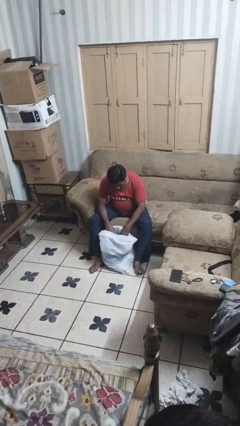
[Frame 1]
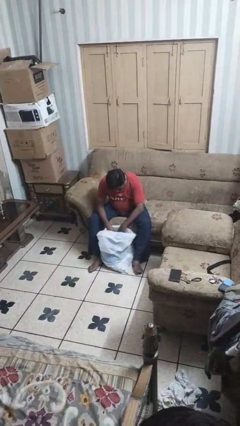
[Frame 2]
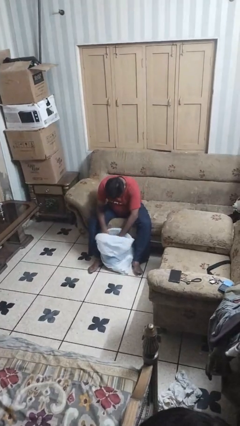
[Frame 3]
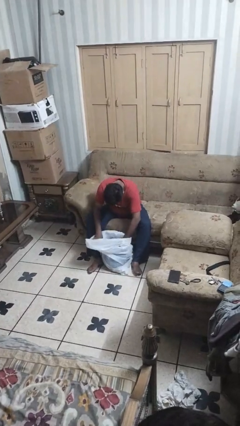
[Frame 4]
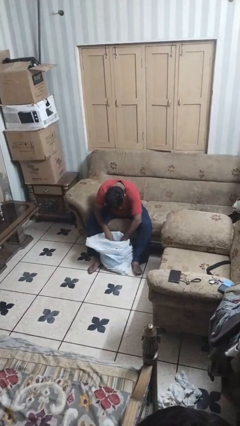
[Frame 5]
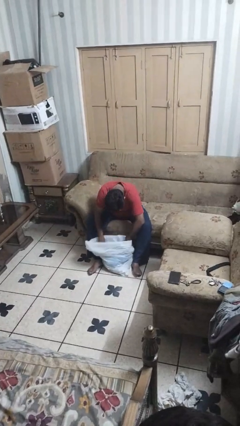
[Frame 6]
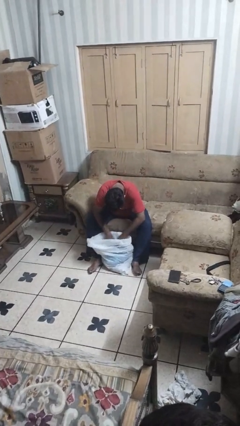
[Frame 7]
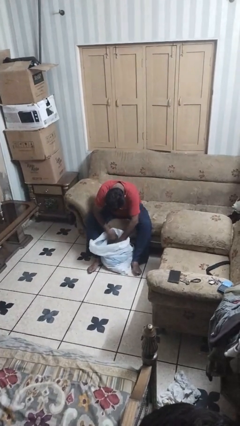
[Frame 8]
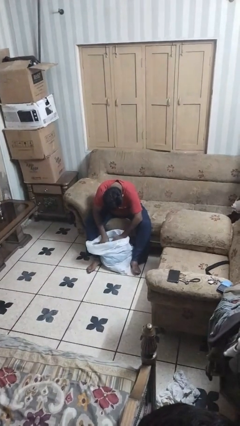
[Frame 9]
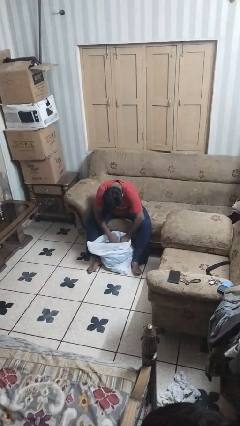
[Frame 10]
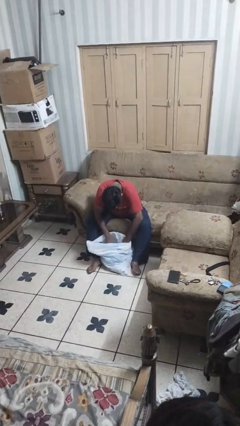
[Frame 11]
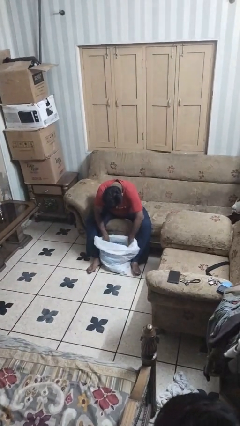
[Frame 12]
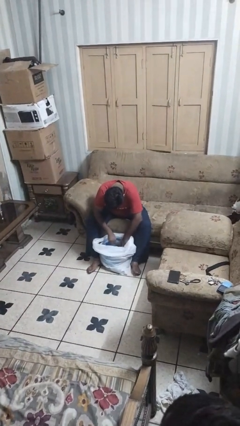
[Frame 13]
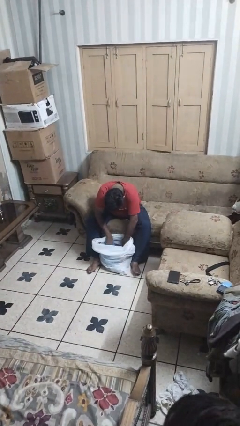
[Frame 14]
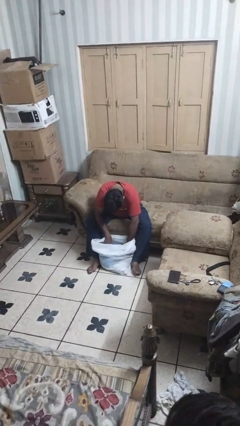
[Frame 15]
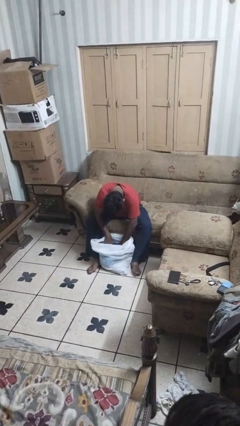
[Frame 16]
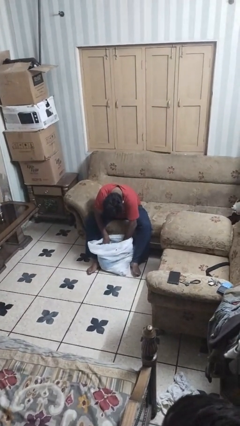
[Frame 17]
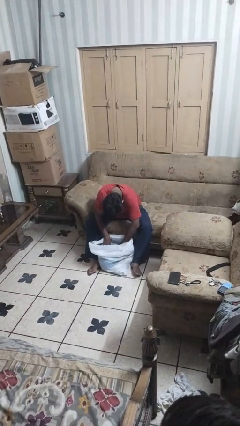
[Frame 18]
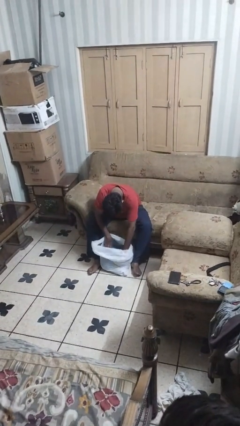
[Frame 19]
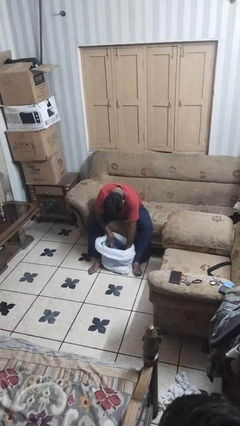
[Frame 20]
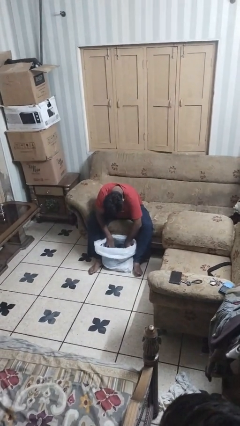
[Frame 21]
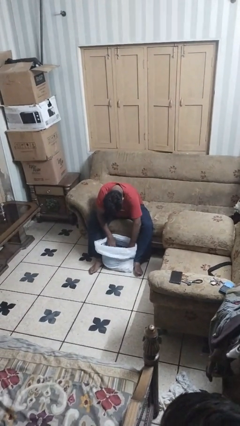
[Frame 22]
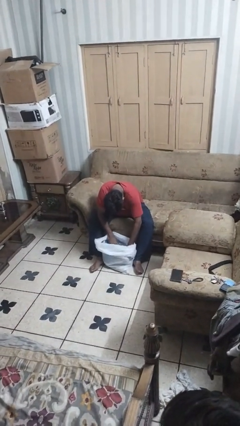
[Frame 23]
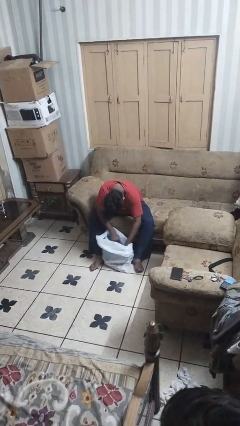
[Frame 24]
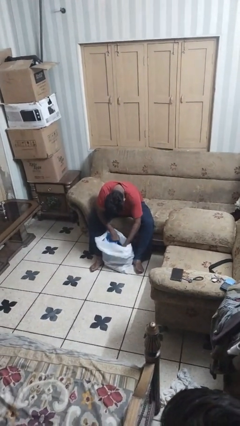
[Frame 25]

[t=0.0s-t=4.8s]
person searches in bag

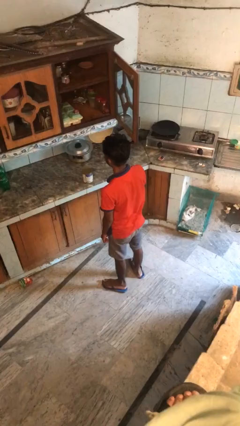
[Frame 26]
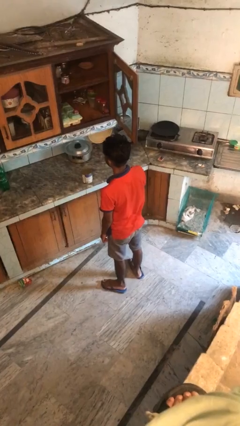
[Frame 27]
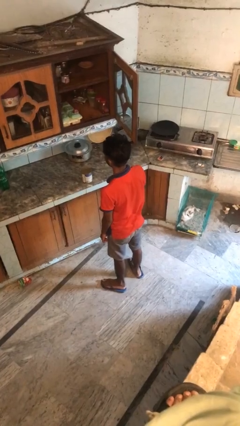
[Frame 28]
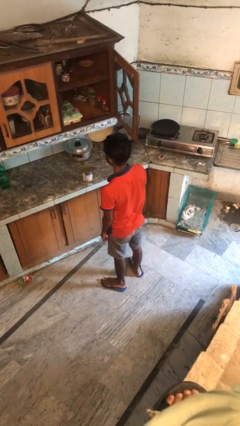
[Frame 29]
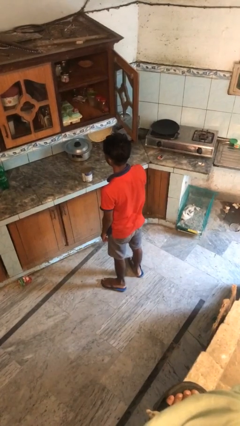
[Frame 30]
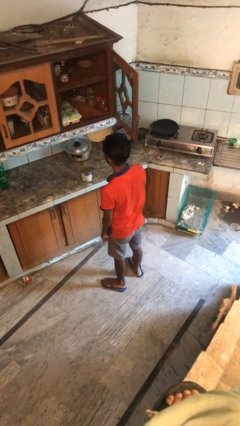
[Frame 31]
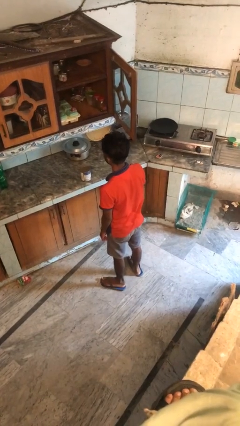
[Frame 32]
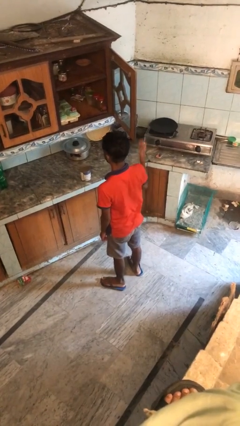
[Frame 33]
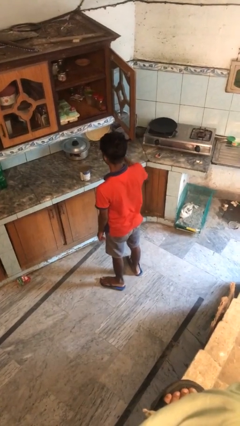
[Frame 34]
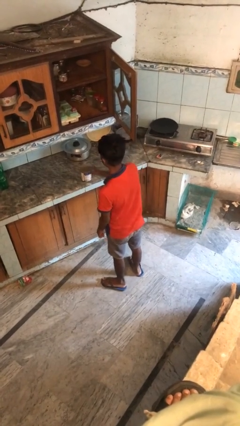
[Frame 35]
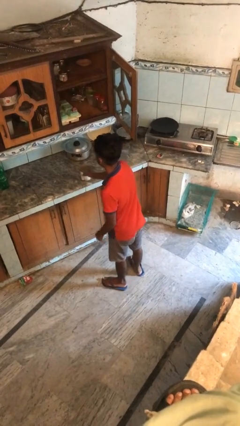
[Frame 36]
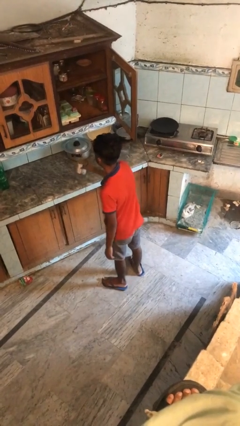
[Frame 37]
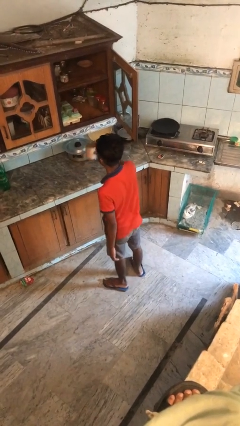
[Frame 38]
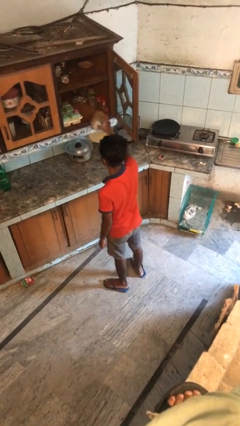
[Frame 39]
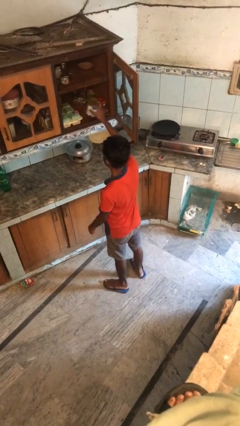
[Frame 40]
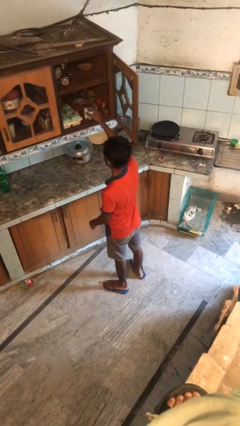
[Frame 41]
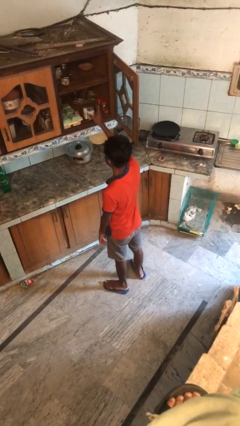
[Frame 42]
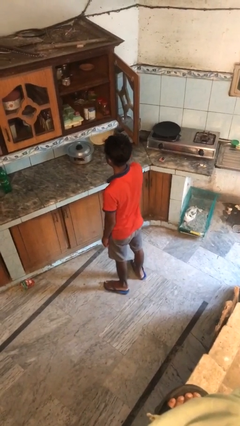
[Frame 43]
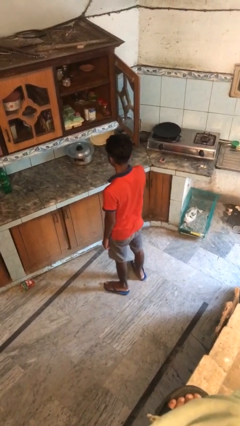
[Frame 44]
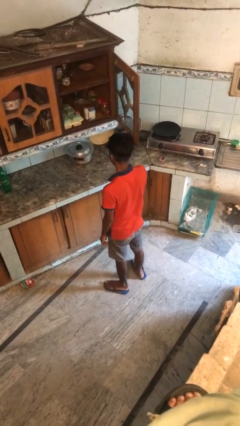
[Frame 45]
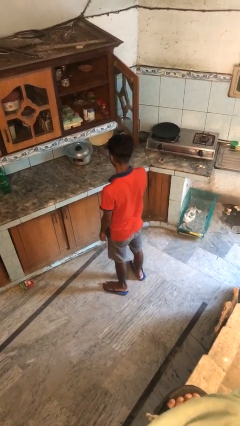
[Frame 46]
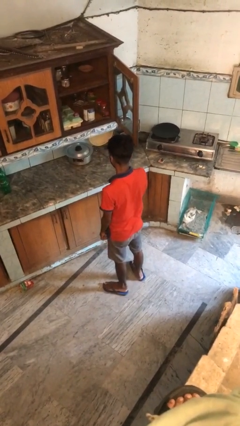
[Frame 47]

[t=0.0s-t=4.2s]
person puts object in cabinet

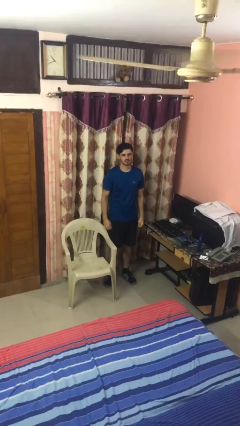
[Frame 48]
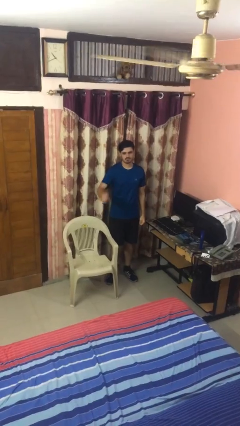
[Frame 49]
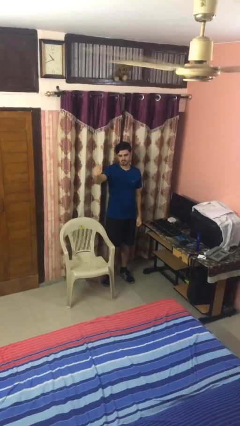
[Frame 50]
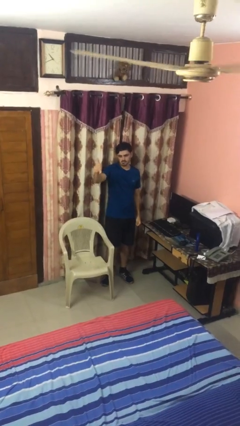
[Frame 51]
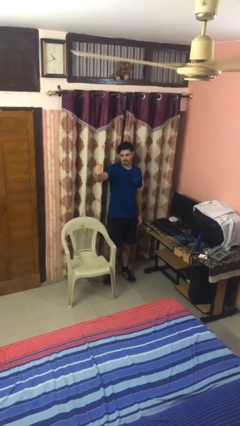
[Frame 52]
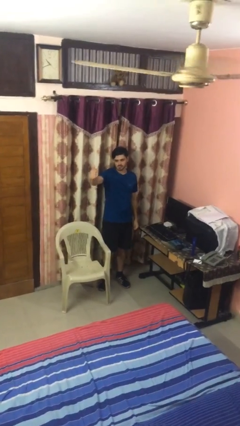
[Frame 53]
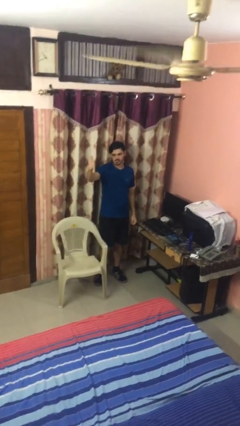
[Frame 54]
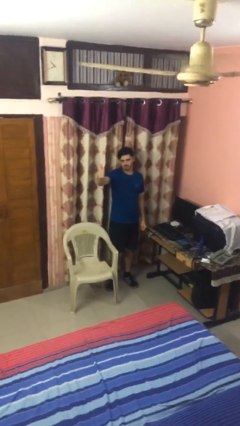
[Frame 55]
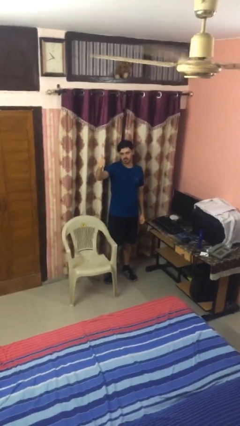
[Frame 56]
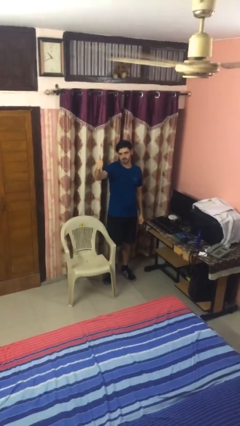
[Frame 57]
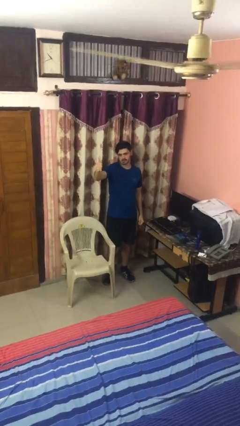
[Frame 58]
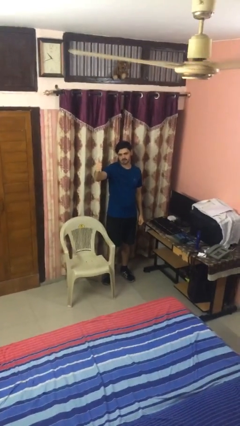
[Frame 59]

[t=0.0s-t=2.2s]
person gestures thumbs up

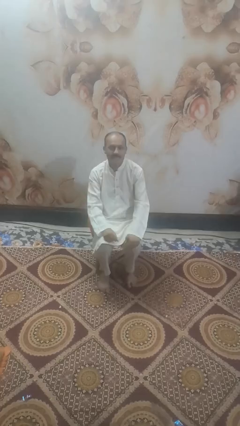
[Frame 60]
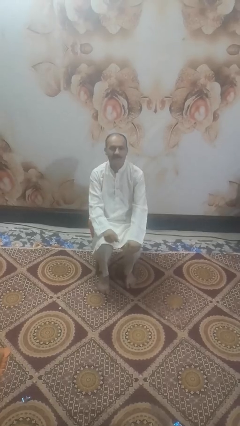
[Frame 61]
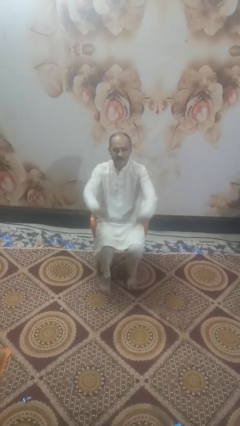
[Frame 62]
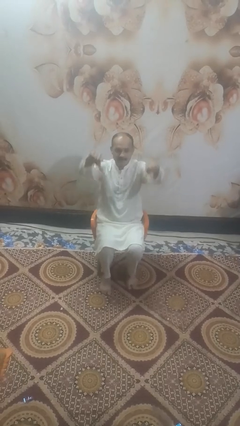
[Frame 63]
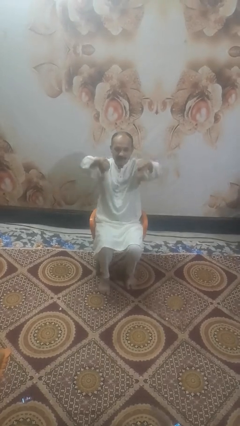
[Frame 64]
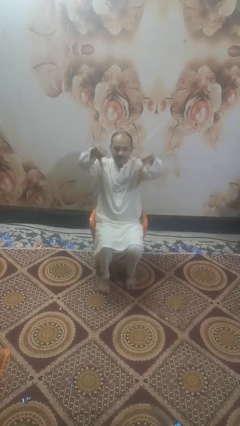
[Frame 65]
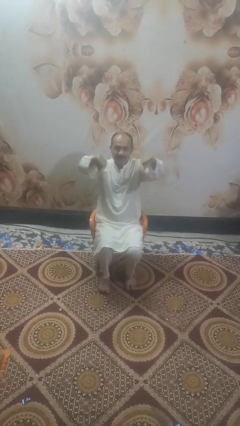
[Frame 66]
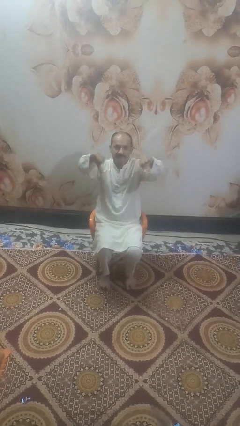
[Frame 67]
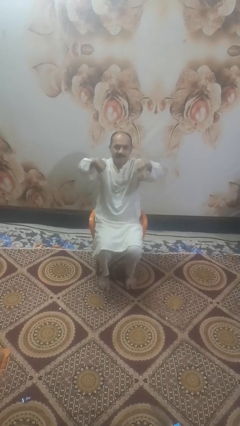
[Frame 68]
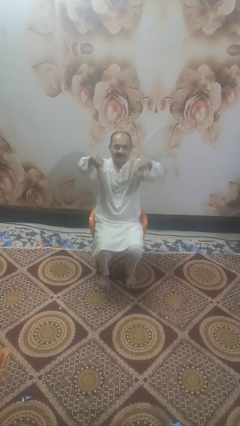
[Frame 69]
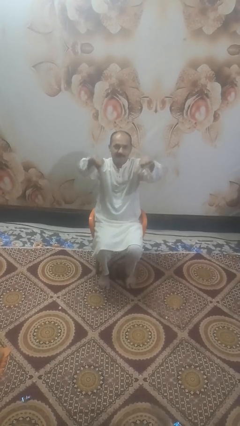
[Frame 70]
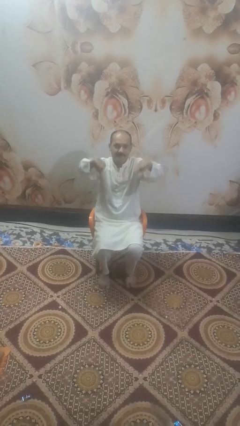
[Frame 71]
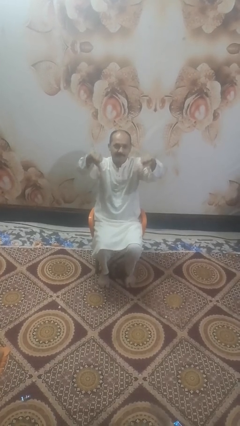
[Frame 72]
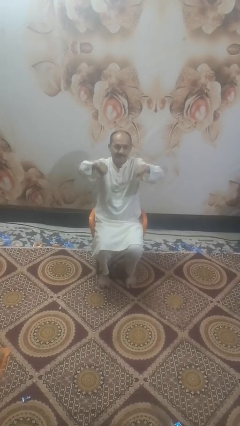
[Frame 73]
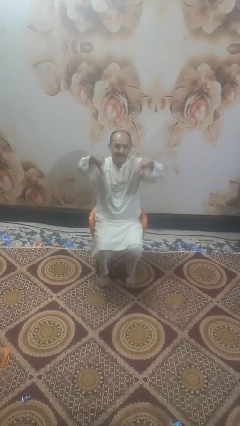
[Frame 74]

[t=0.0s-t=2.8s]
person gestures thumbs down

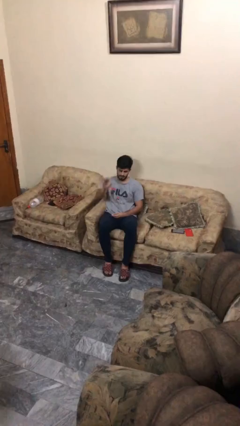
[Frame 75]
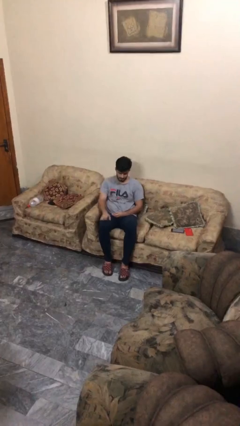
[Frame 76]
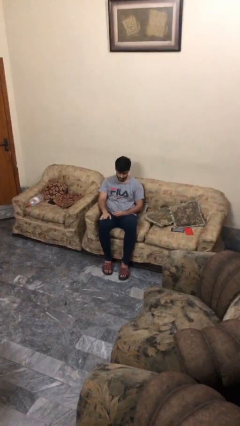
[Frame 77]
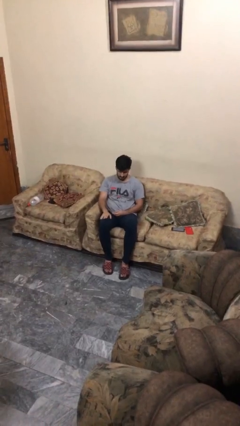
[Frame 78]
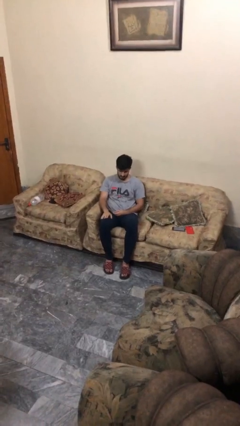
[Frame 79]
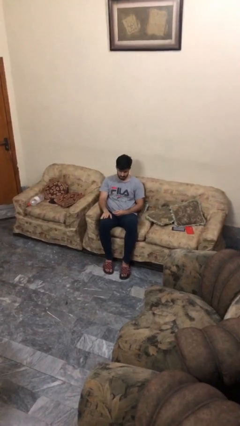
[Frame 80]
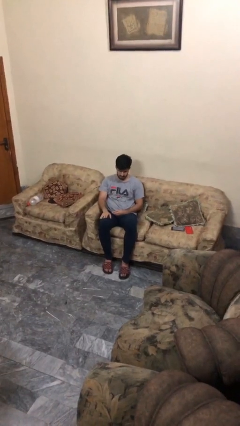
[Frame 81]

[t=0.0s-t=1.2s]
person gestures lower hand

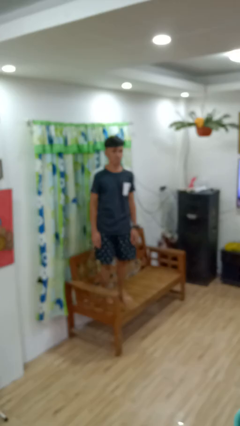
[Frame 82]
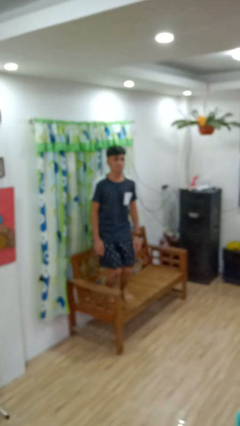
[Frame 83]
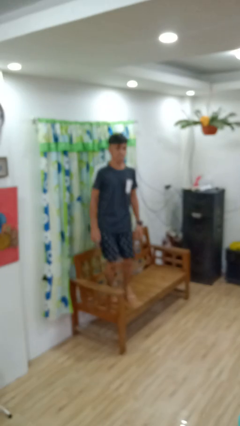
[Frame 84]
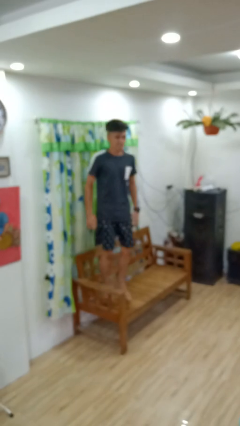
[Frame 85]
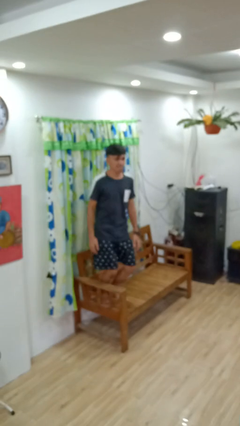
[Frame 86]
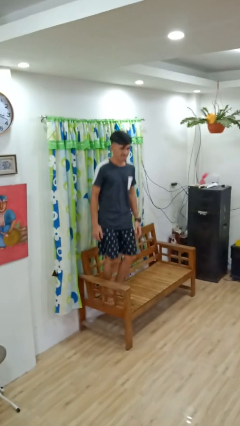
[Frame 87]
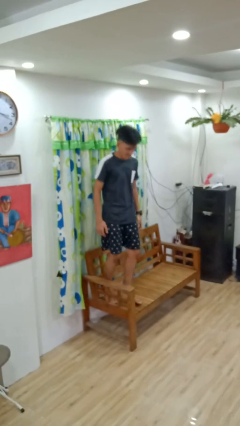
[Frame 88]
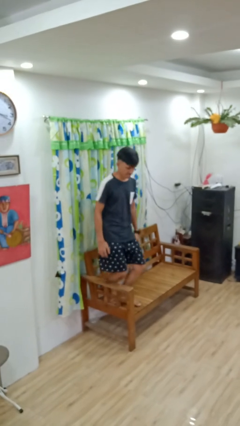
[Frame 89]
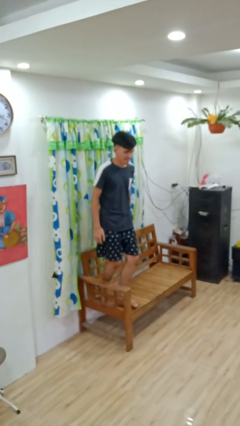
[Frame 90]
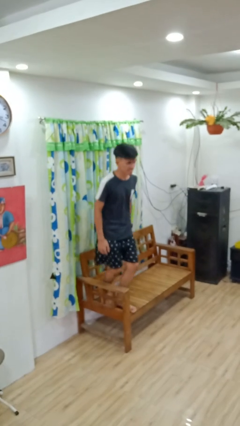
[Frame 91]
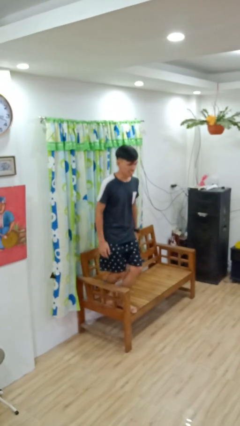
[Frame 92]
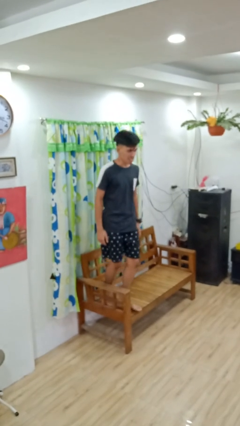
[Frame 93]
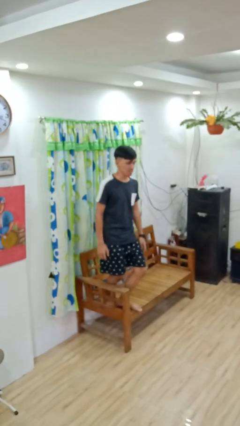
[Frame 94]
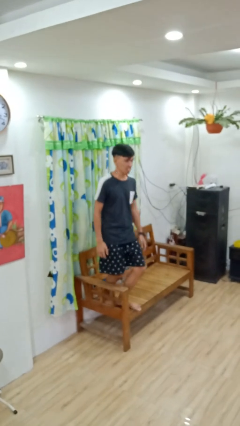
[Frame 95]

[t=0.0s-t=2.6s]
person jumps on couch
